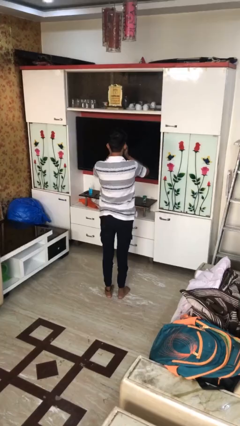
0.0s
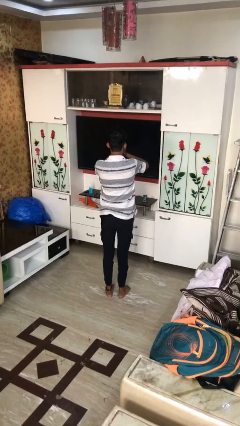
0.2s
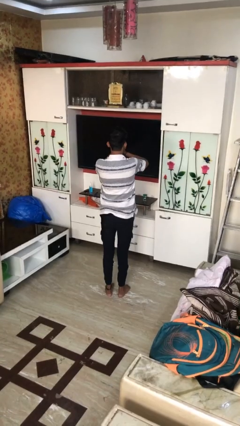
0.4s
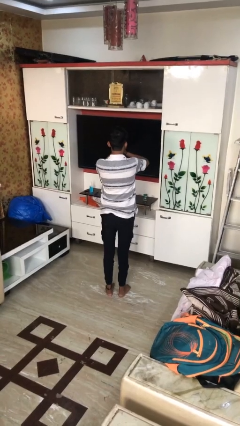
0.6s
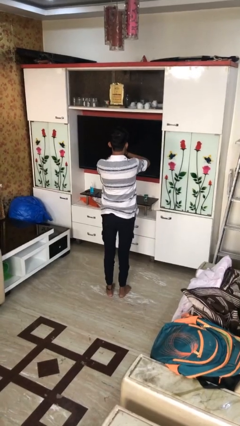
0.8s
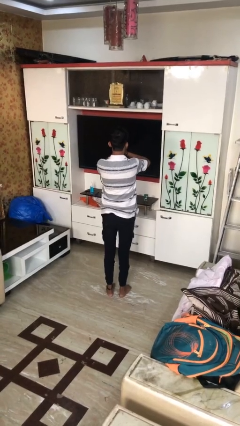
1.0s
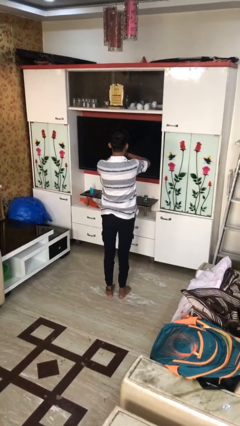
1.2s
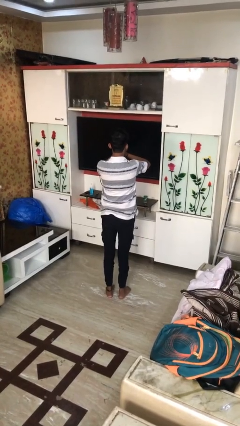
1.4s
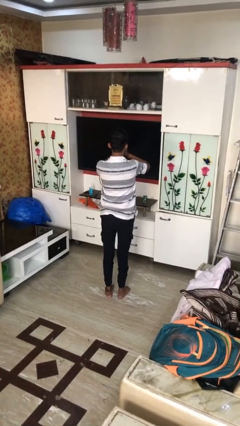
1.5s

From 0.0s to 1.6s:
person covers face with hands

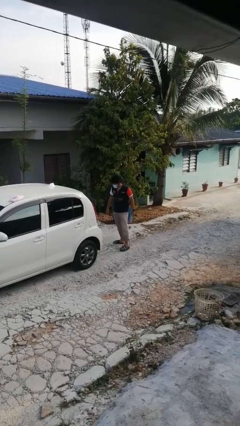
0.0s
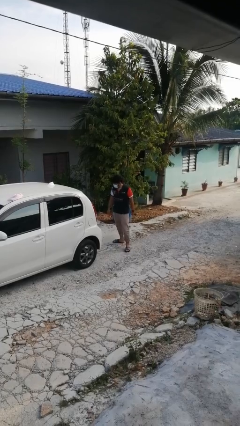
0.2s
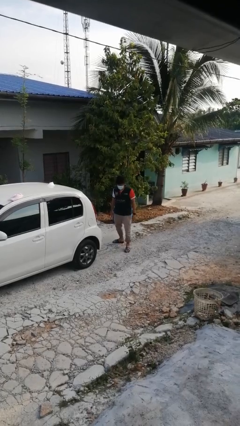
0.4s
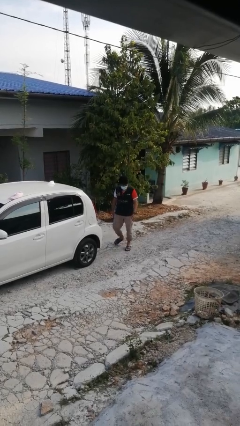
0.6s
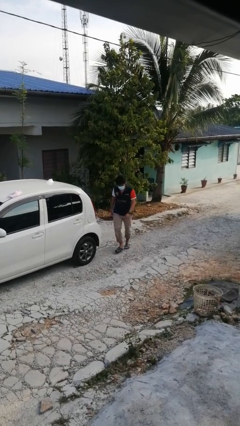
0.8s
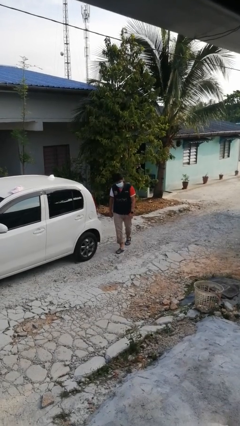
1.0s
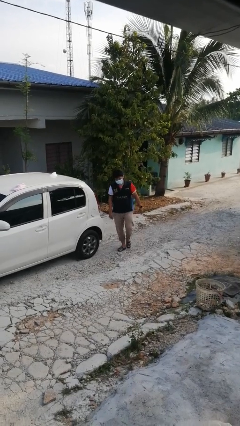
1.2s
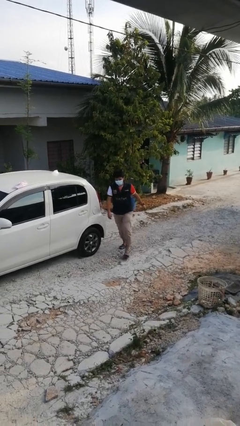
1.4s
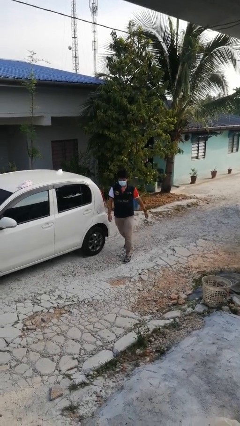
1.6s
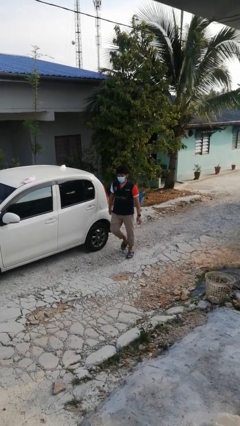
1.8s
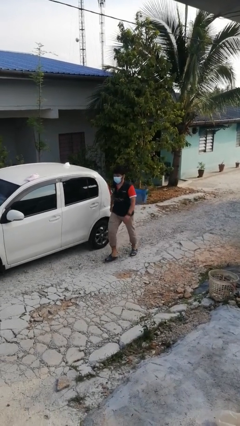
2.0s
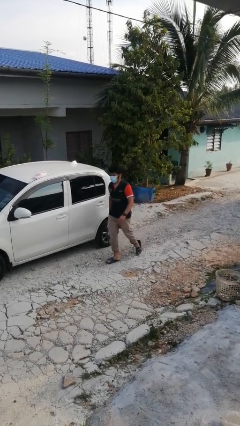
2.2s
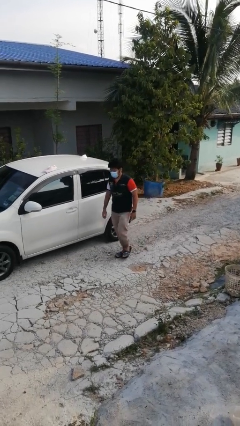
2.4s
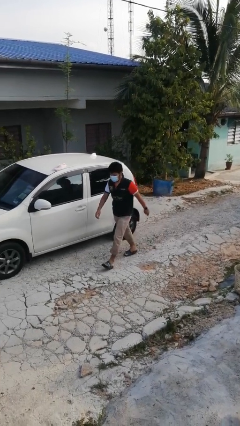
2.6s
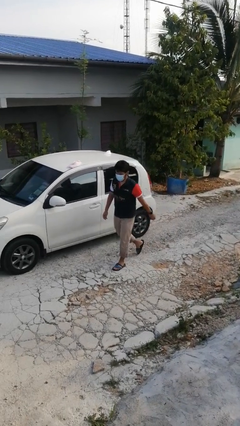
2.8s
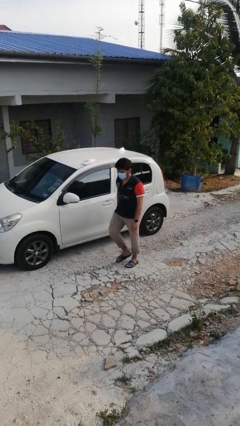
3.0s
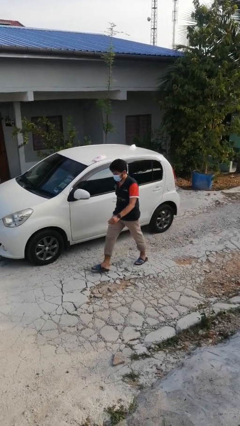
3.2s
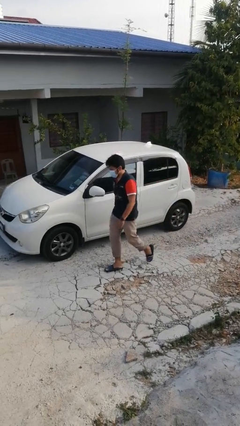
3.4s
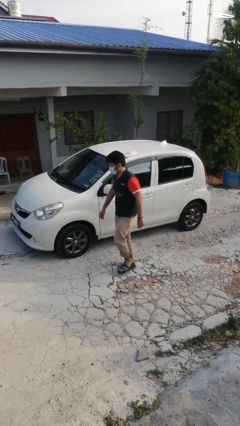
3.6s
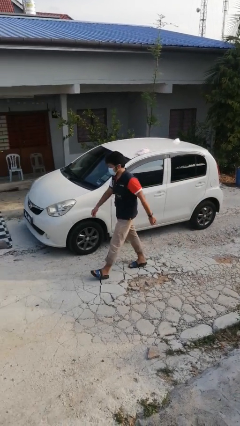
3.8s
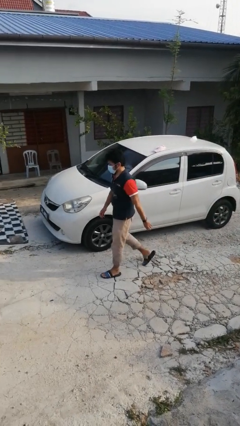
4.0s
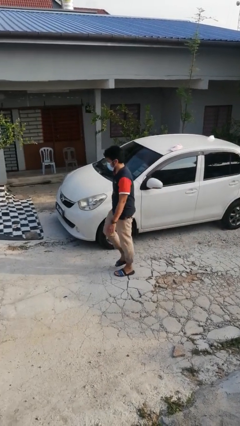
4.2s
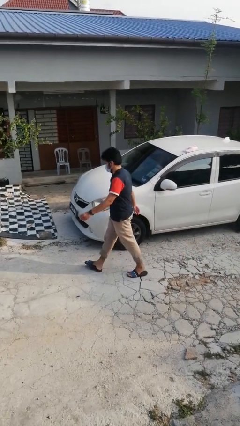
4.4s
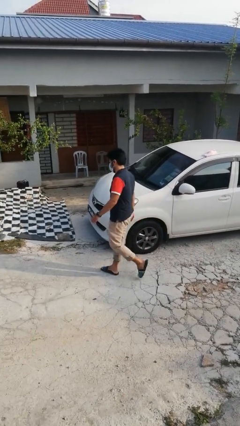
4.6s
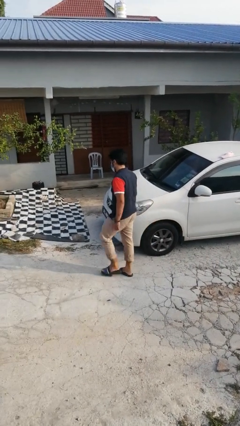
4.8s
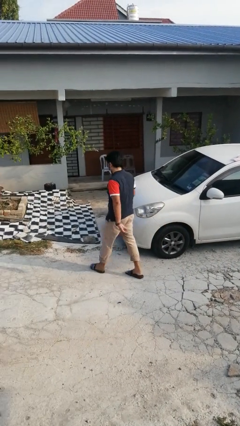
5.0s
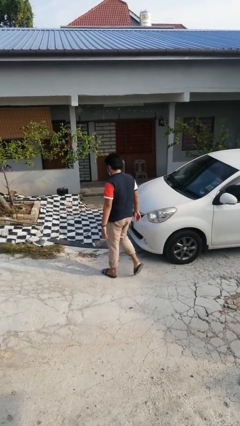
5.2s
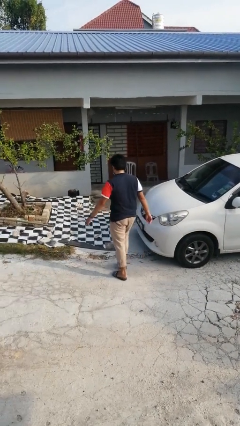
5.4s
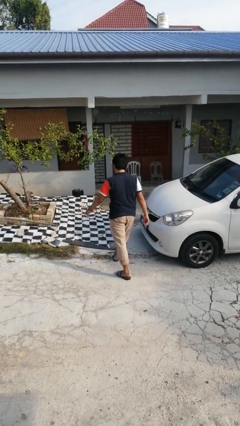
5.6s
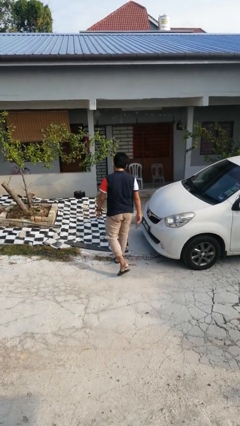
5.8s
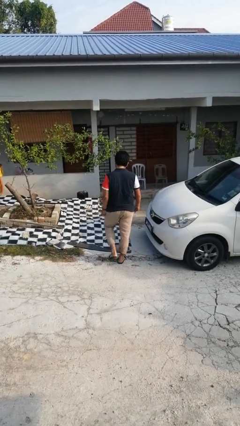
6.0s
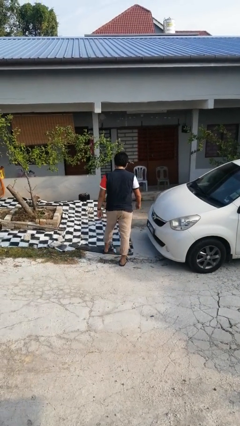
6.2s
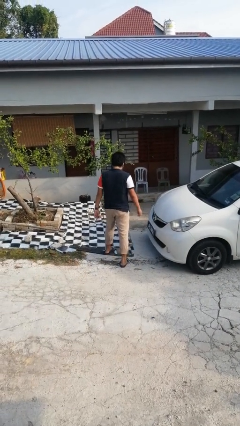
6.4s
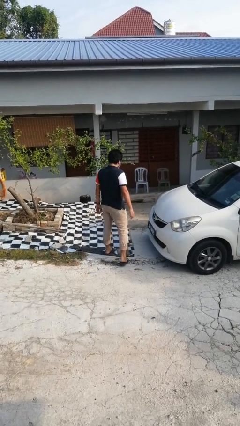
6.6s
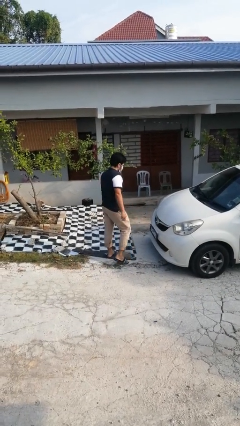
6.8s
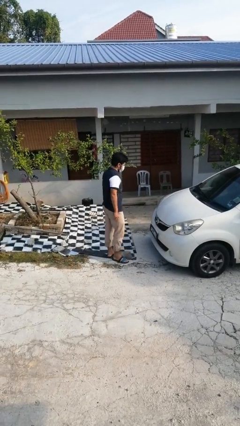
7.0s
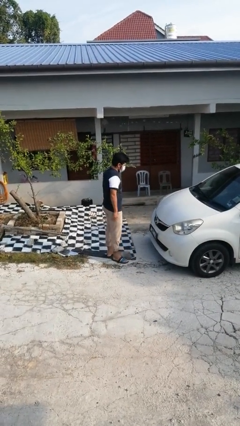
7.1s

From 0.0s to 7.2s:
person walks around car

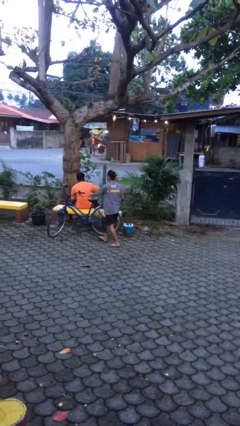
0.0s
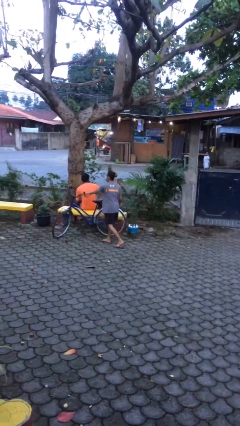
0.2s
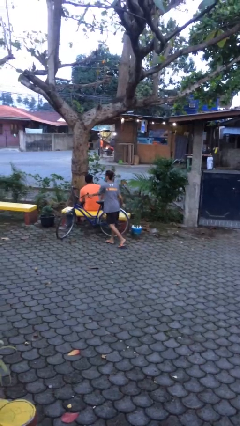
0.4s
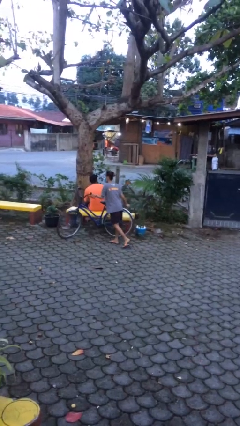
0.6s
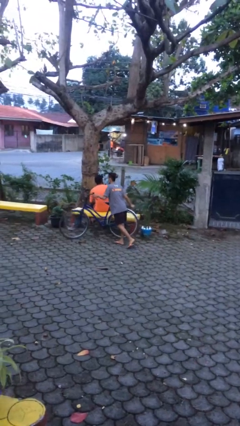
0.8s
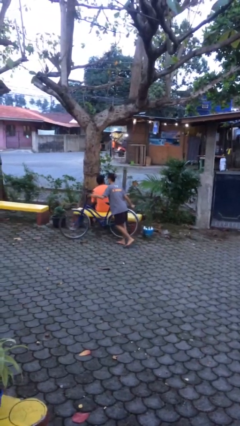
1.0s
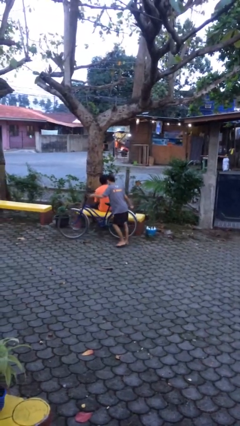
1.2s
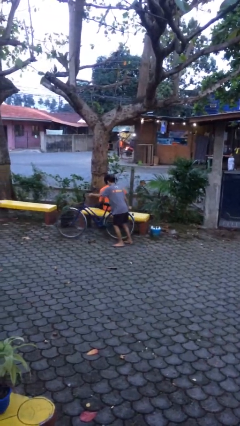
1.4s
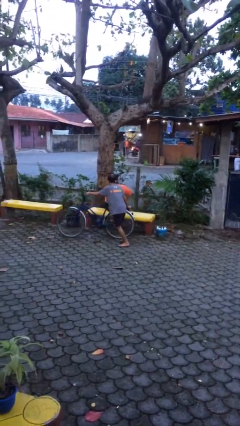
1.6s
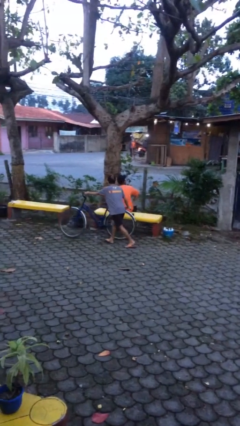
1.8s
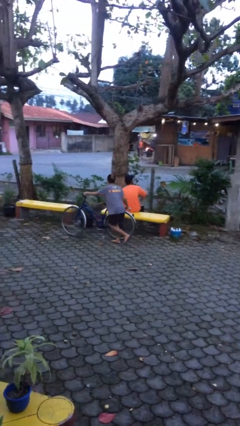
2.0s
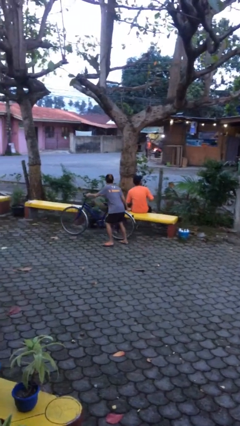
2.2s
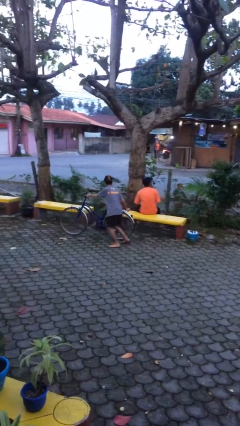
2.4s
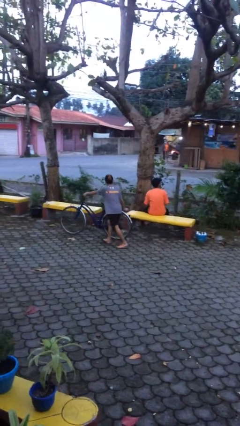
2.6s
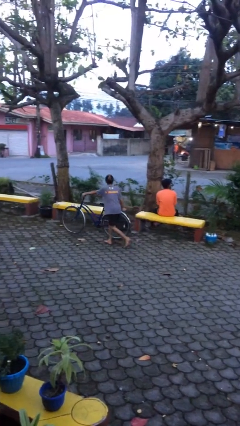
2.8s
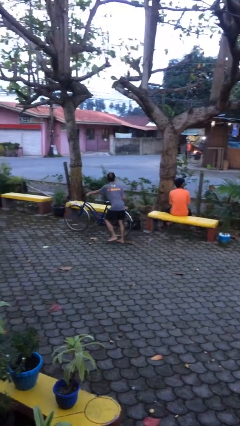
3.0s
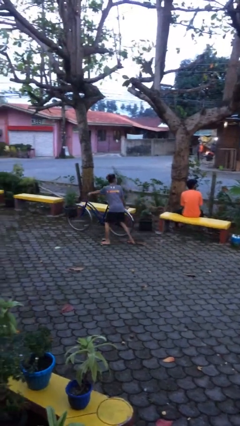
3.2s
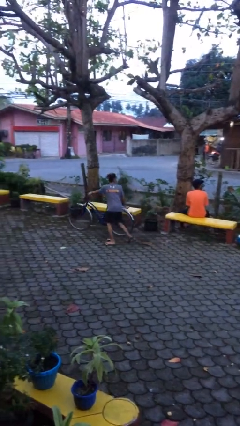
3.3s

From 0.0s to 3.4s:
person steals object from person

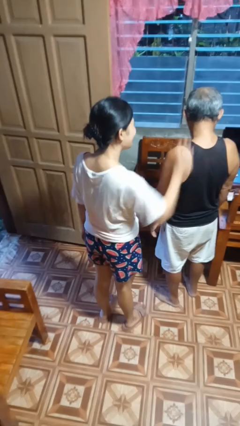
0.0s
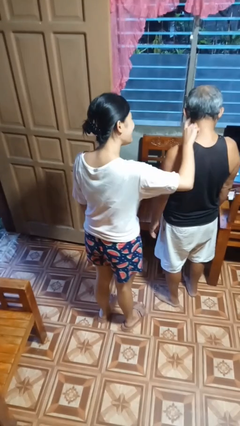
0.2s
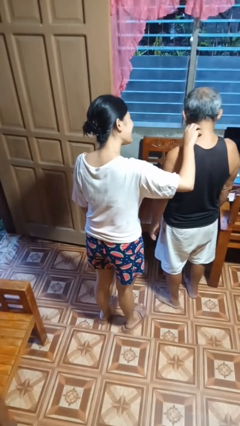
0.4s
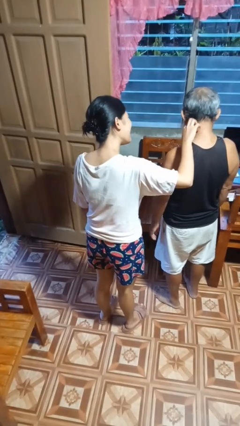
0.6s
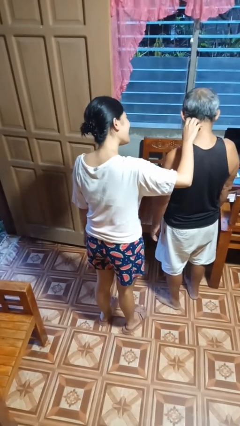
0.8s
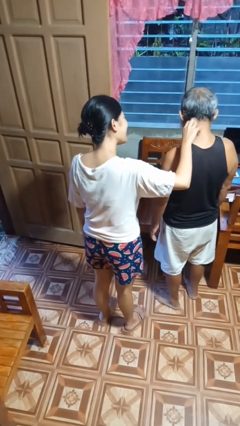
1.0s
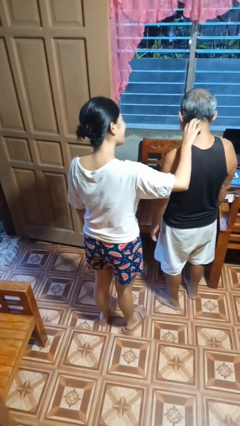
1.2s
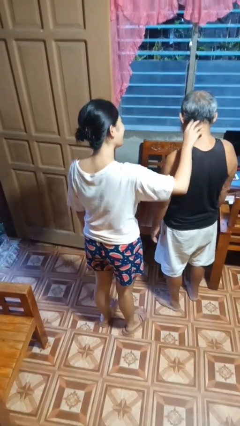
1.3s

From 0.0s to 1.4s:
person tickles person

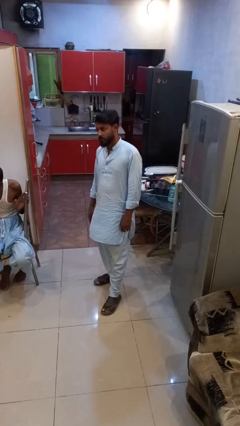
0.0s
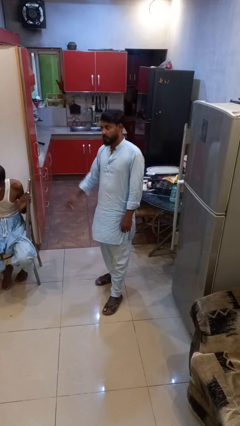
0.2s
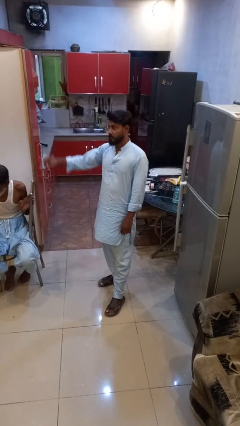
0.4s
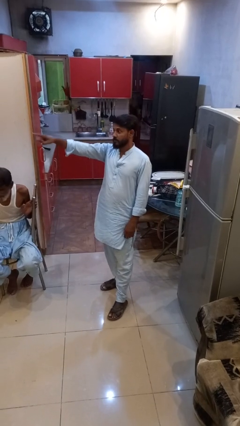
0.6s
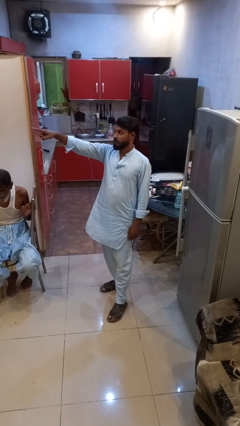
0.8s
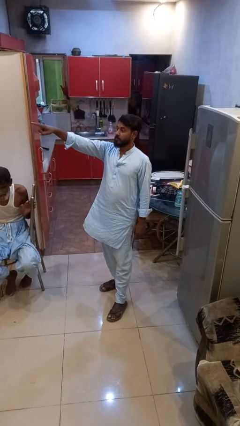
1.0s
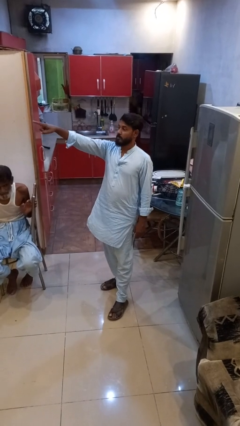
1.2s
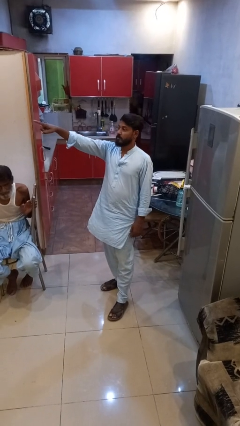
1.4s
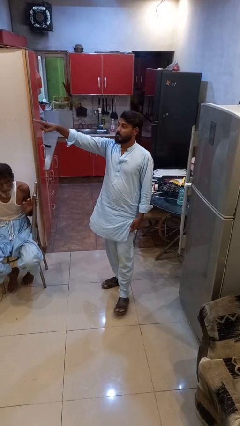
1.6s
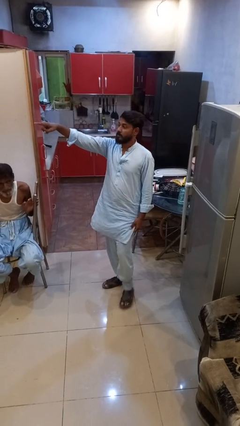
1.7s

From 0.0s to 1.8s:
person points at person

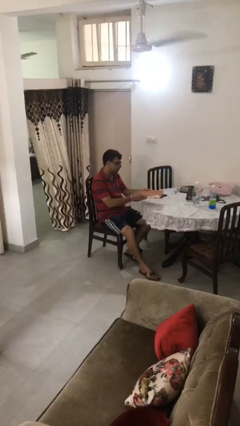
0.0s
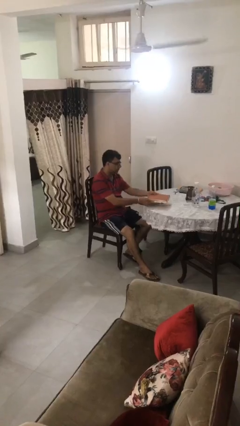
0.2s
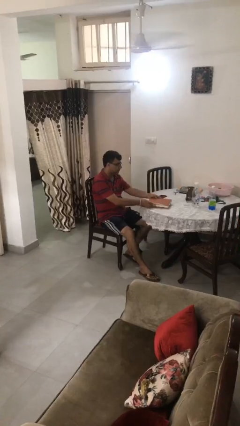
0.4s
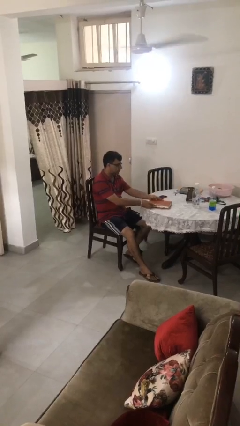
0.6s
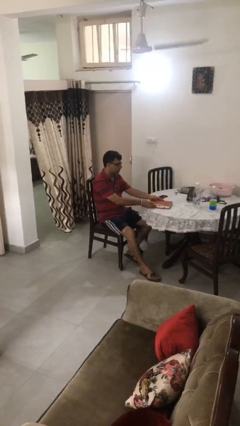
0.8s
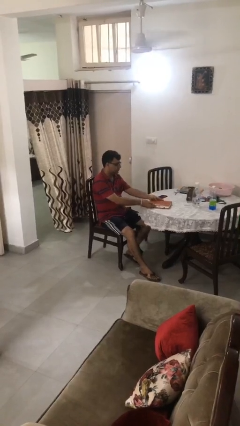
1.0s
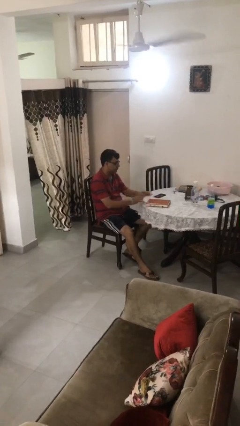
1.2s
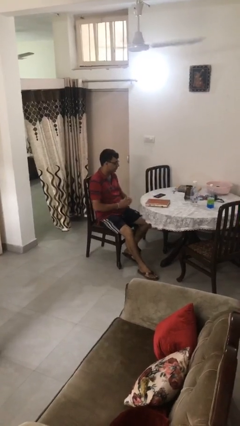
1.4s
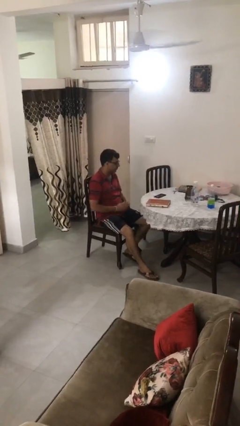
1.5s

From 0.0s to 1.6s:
person puts down object on table

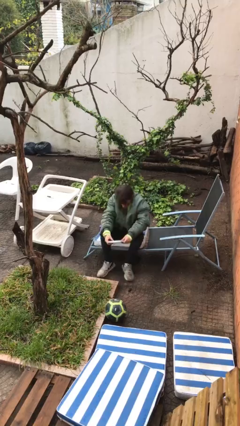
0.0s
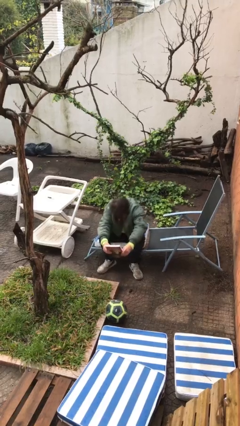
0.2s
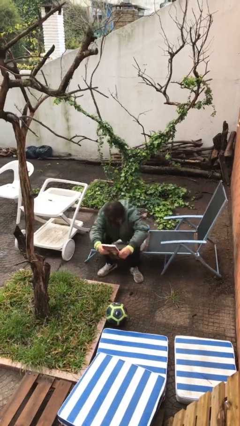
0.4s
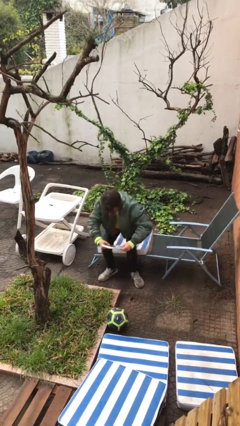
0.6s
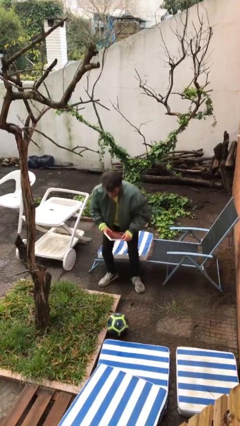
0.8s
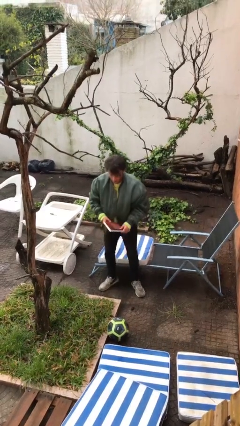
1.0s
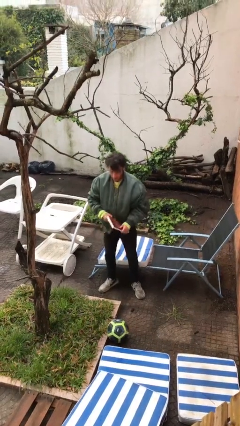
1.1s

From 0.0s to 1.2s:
person stands up
